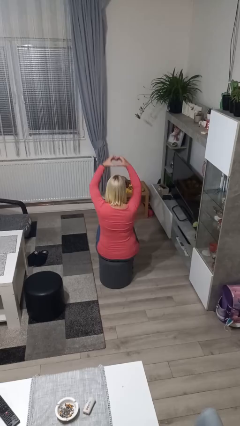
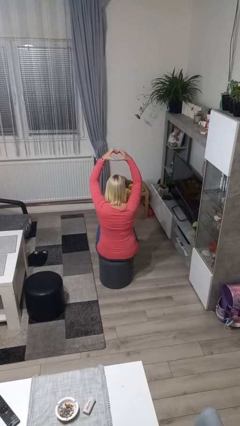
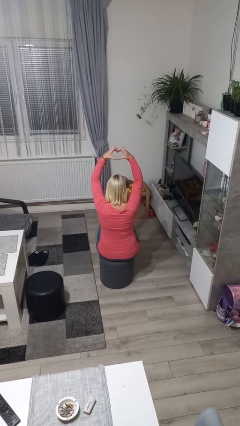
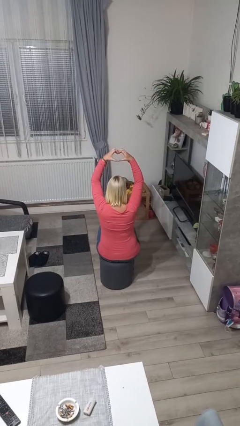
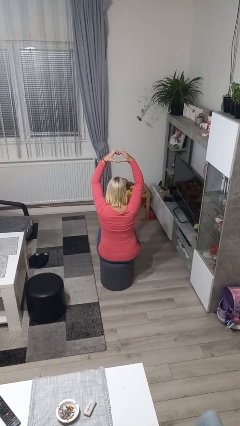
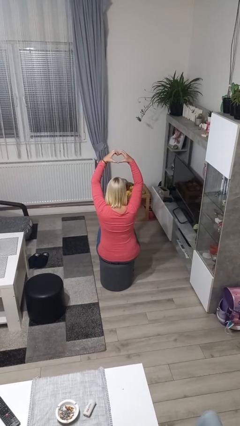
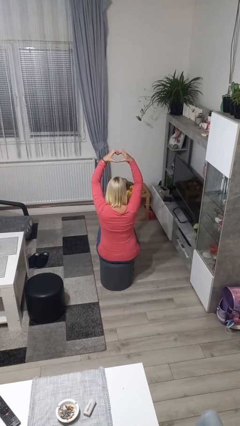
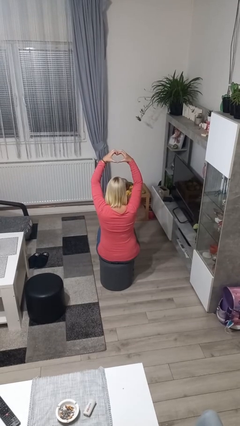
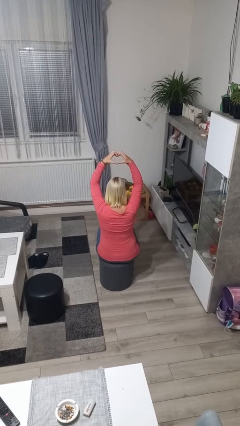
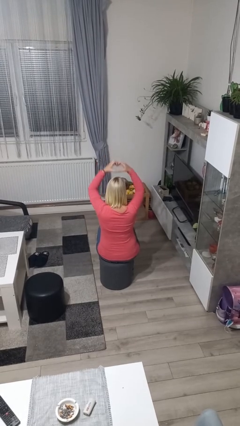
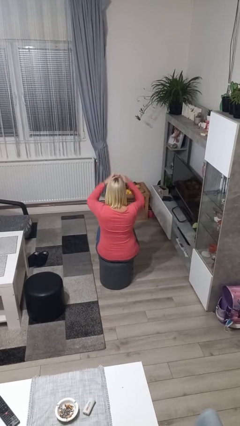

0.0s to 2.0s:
person gestures heart

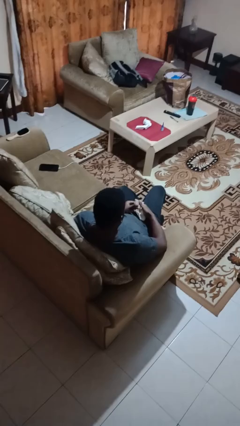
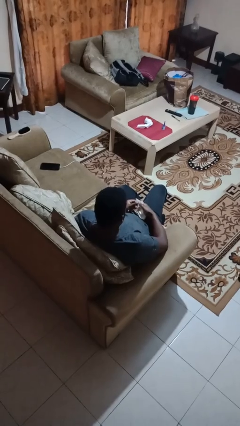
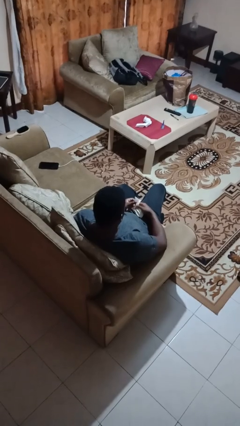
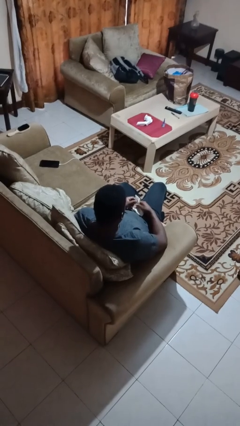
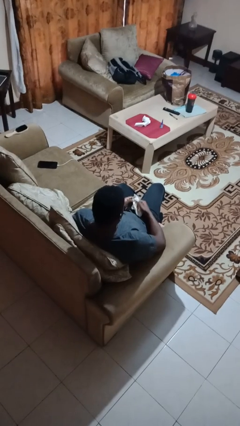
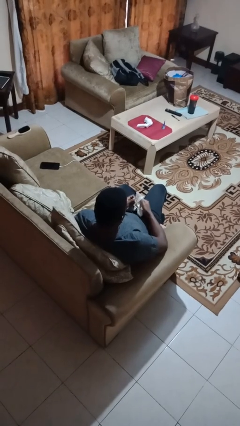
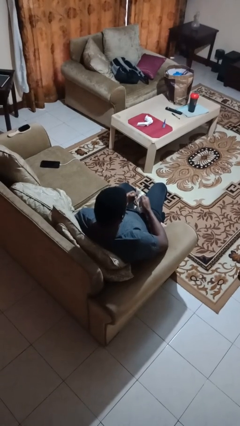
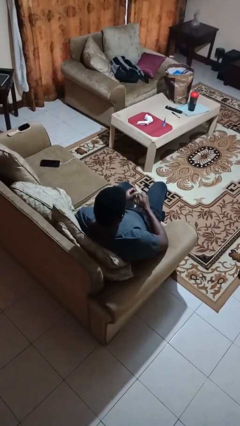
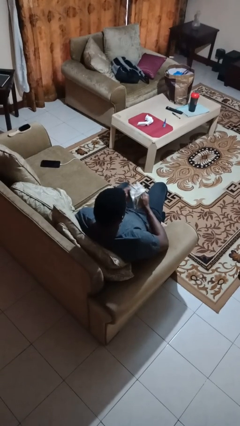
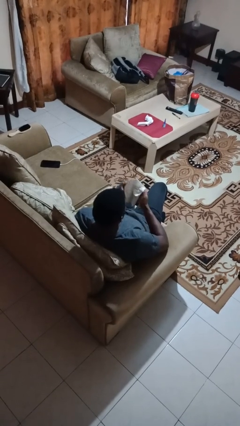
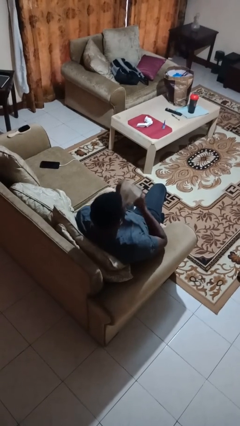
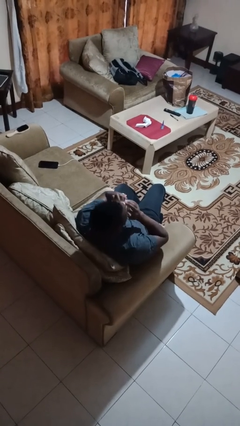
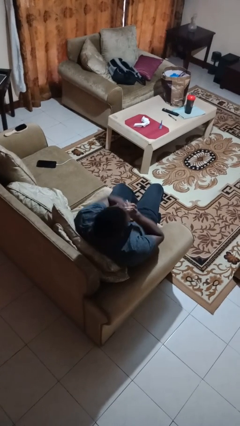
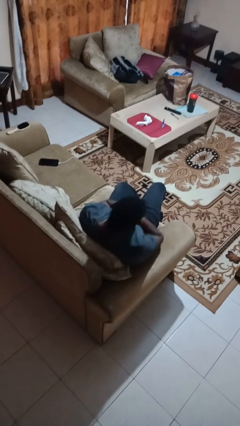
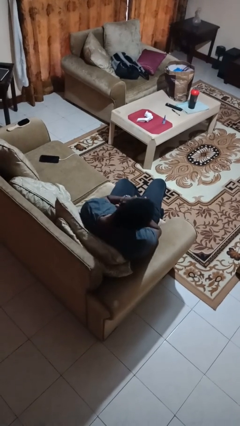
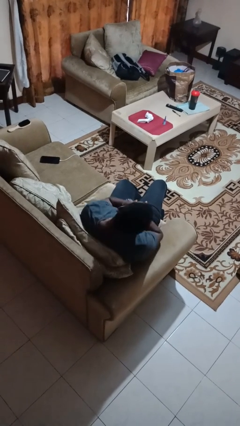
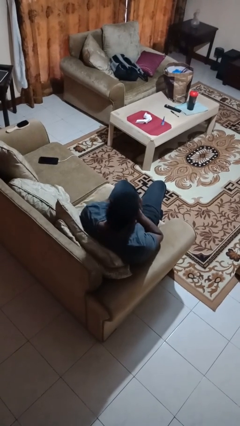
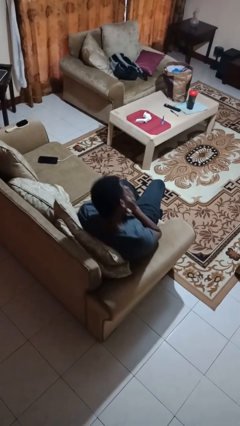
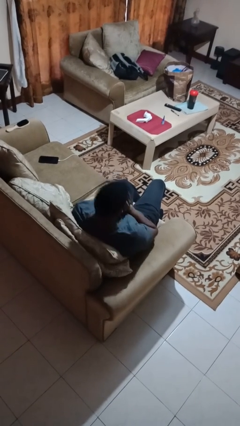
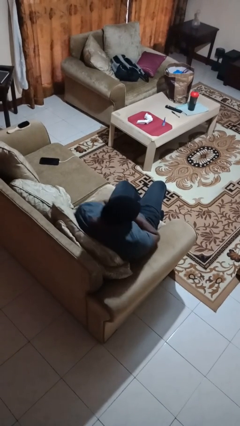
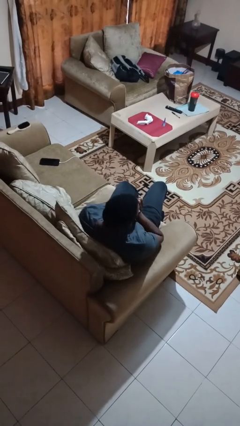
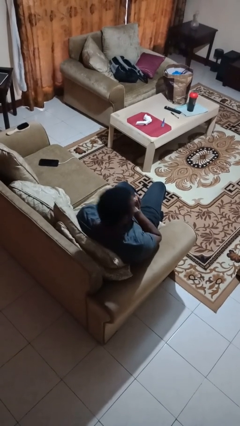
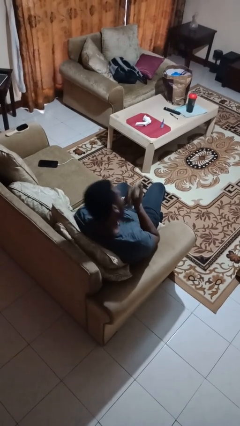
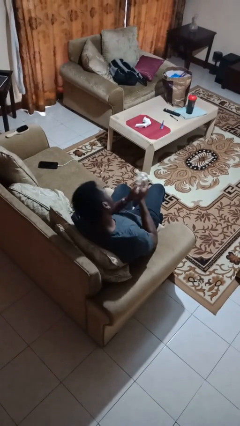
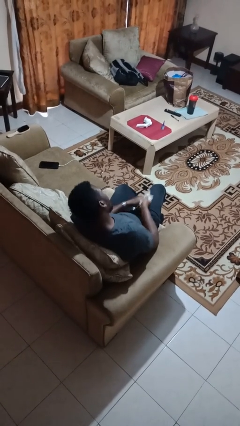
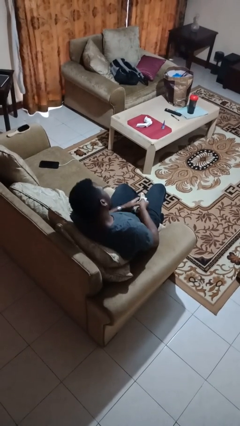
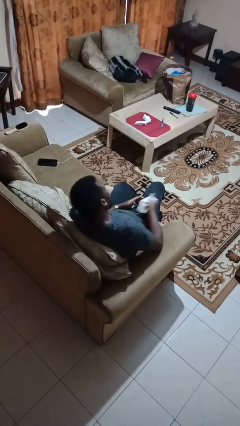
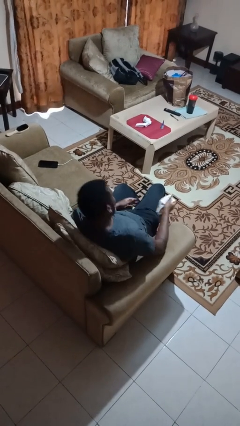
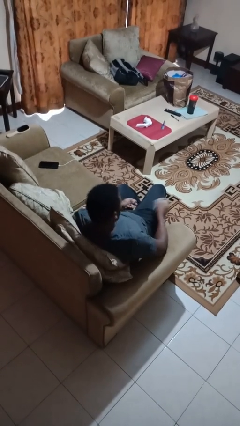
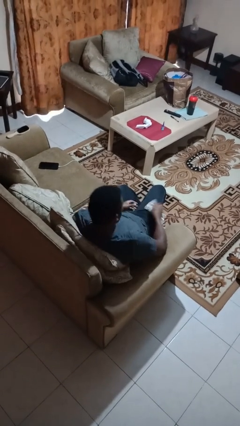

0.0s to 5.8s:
person blows nose

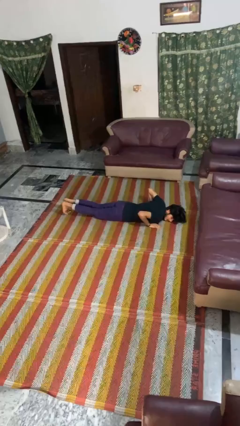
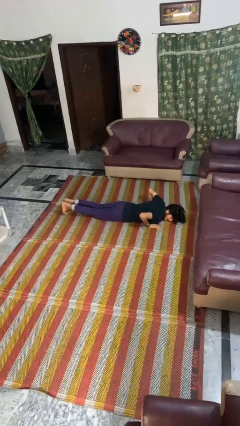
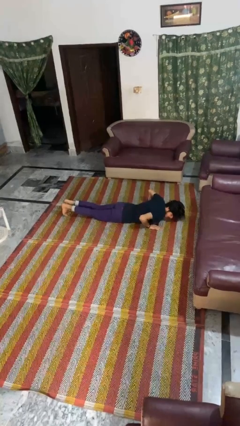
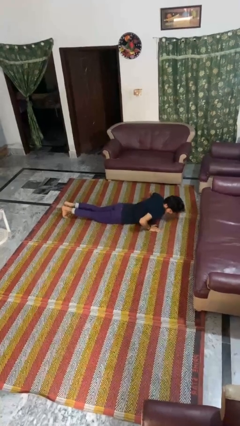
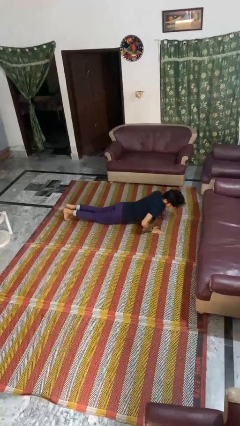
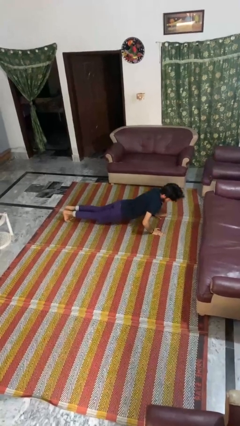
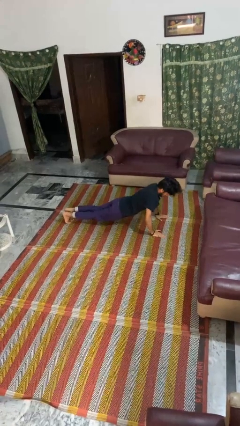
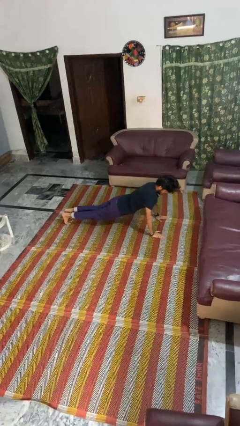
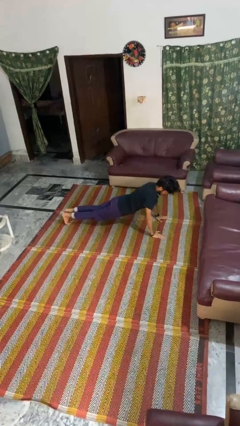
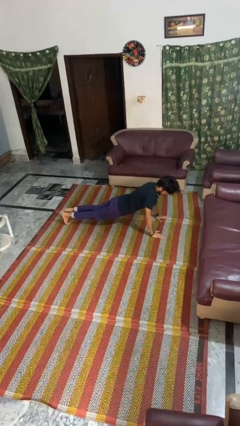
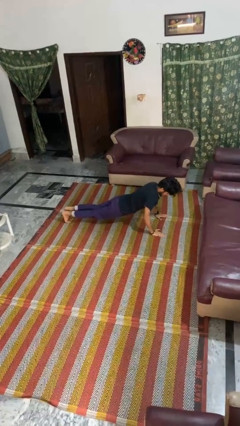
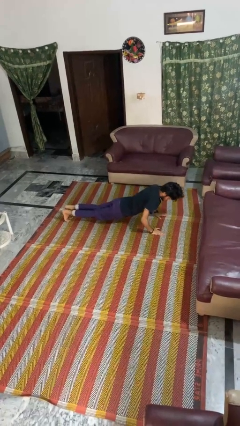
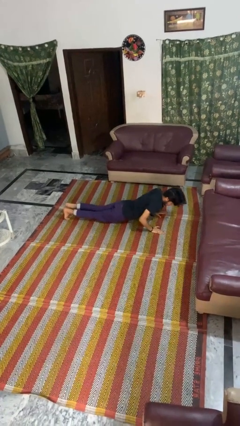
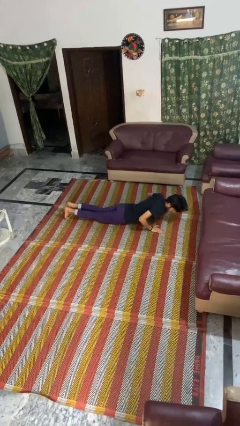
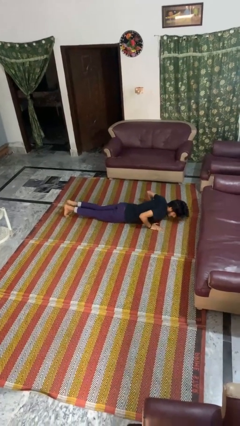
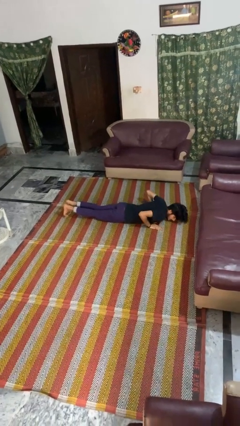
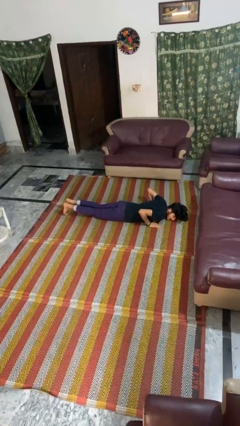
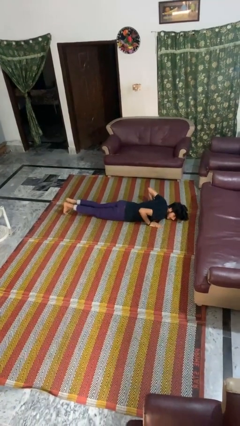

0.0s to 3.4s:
person exercises with pushup

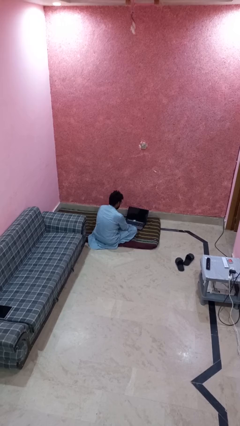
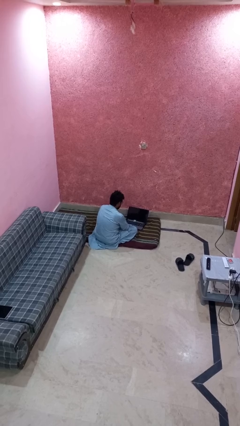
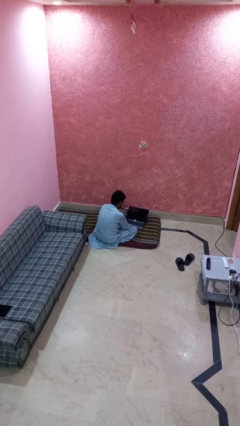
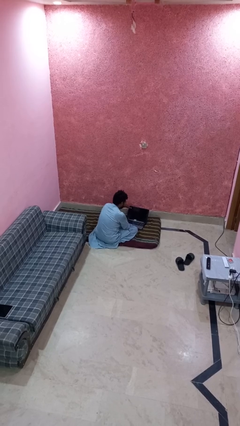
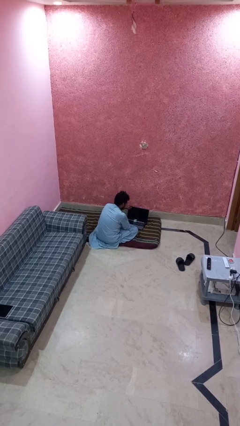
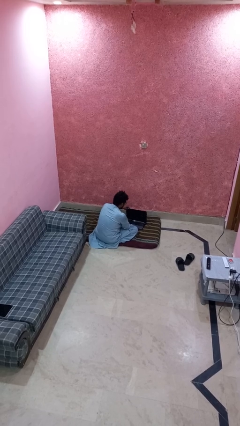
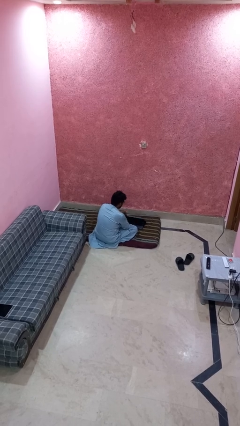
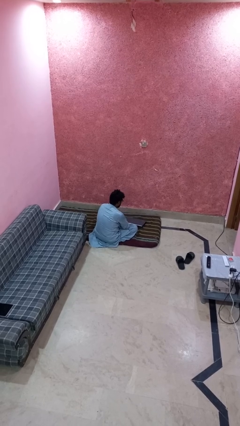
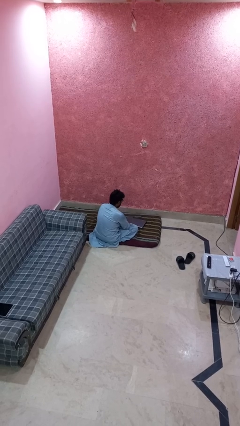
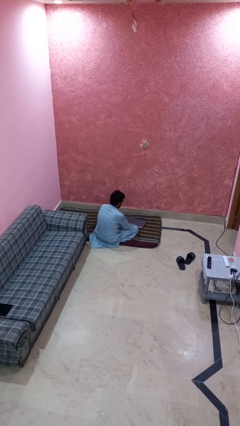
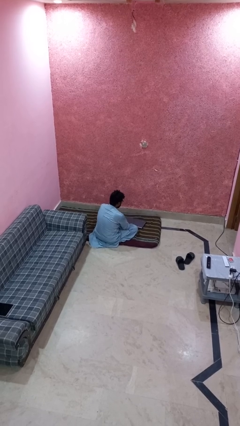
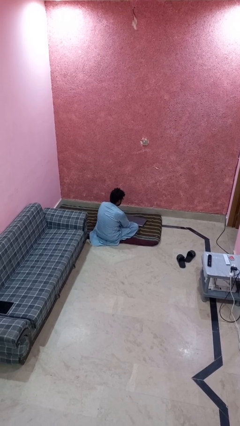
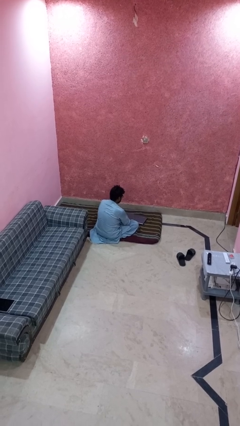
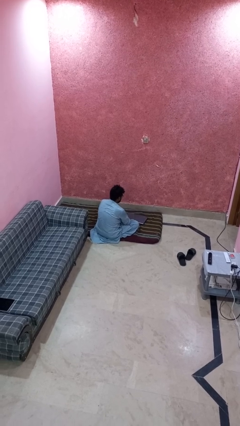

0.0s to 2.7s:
person closes laptop

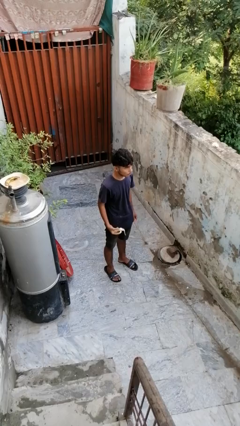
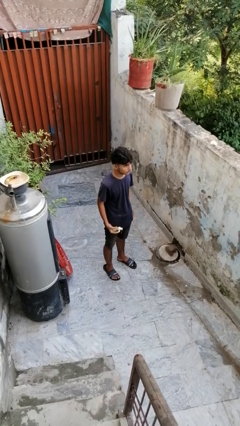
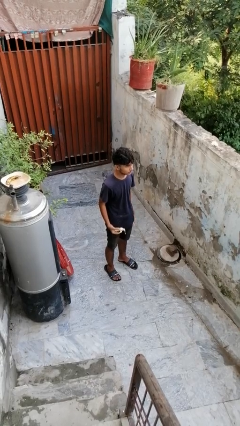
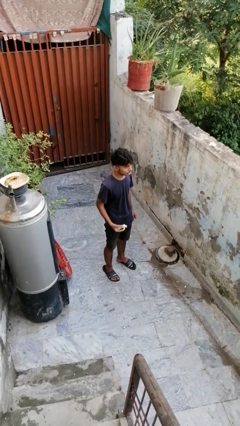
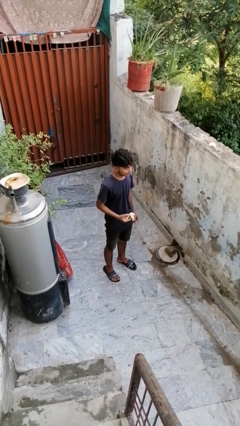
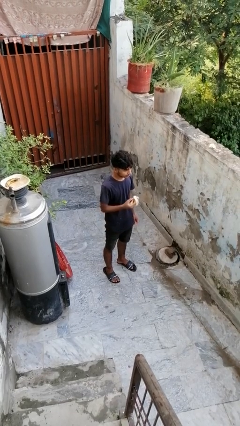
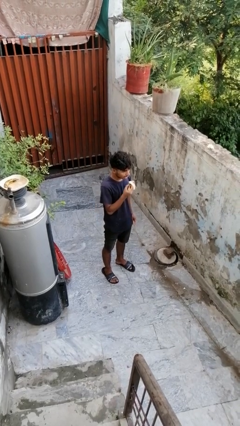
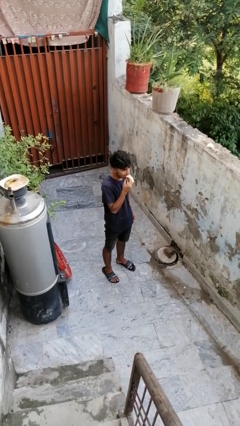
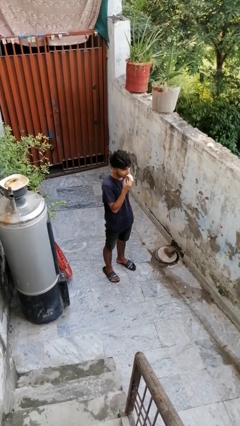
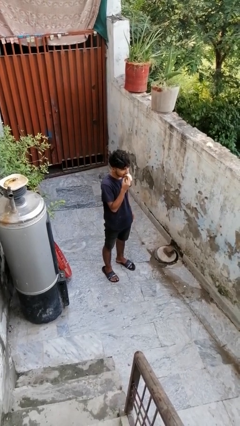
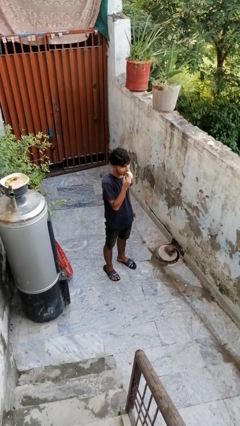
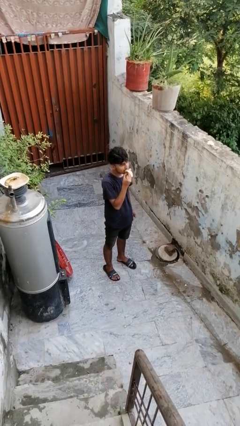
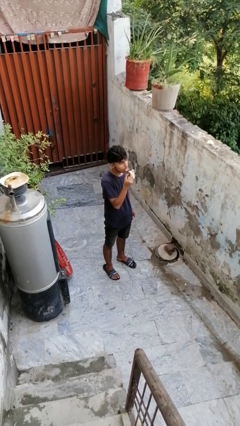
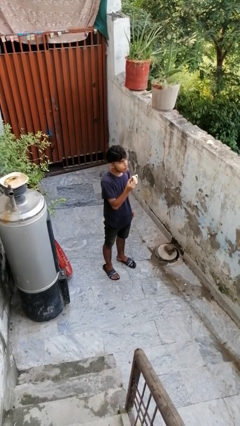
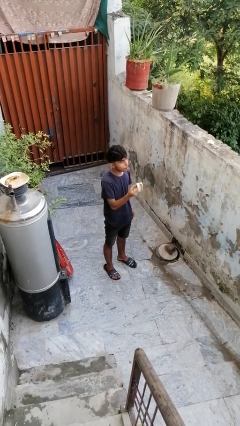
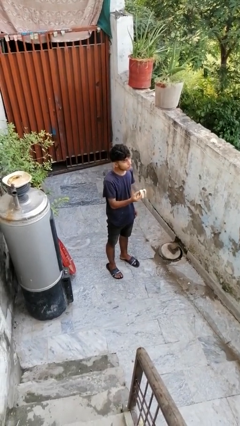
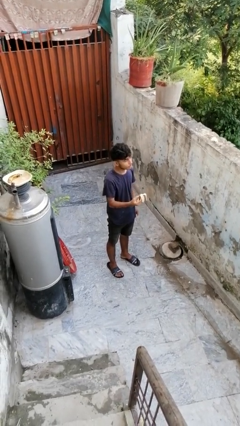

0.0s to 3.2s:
person eats banana

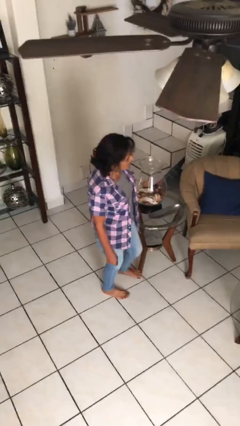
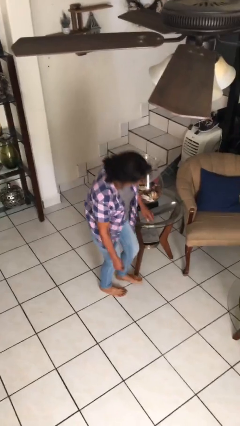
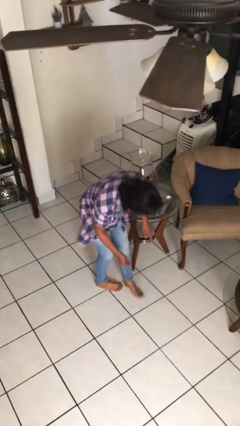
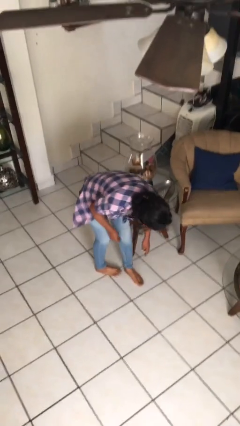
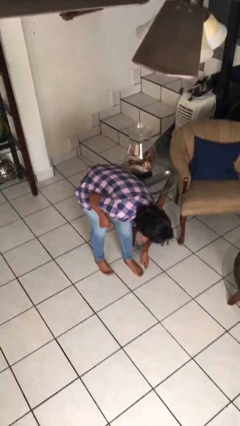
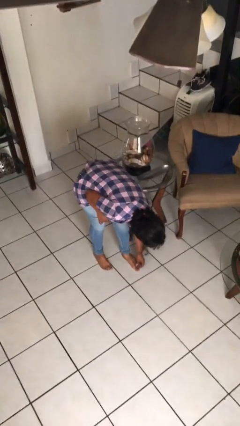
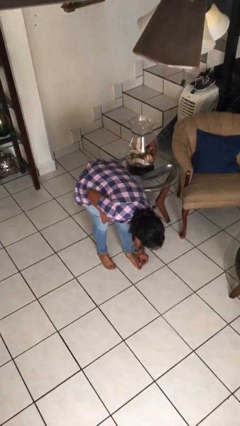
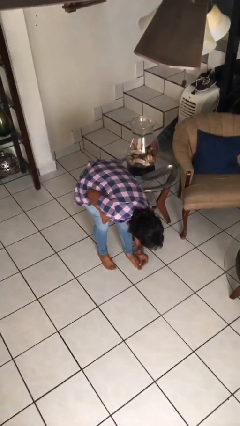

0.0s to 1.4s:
person stubs toe
